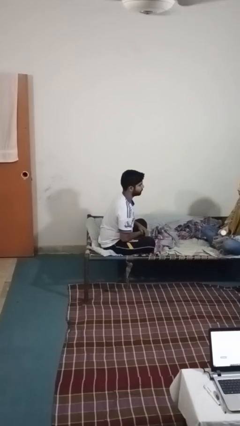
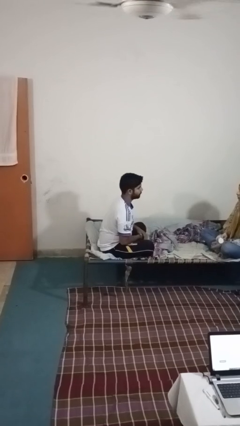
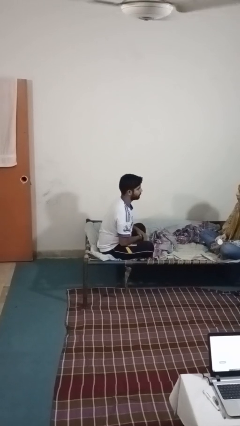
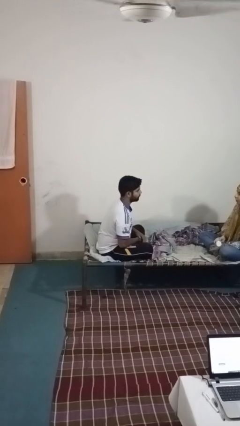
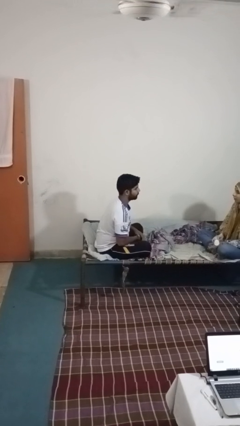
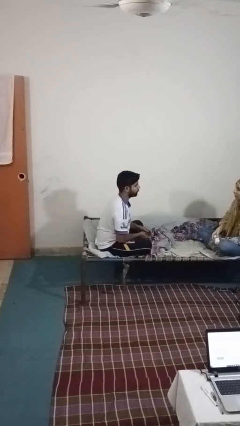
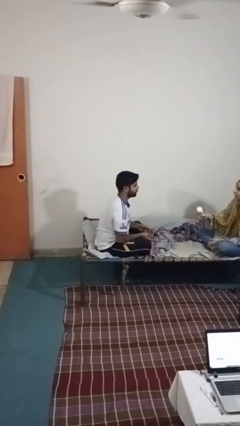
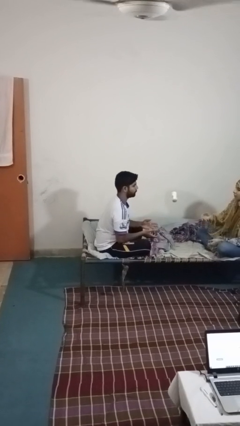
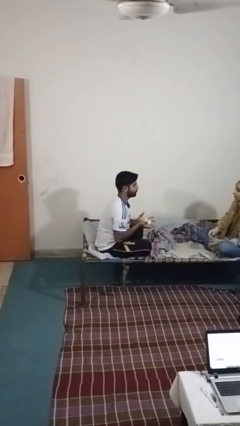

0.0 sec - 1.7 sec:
person catches object from person

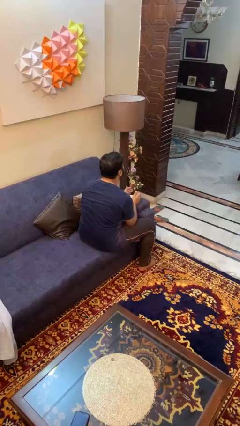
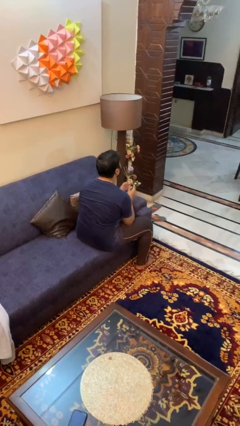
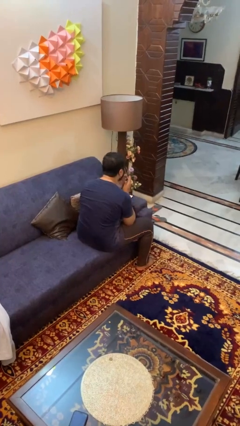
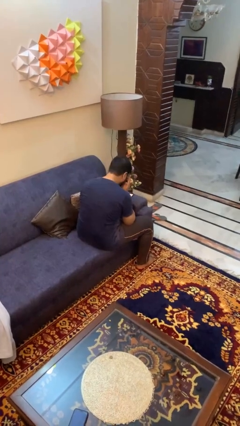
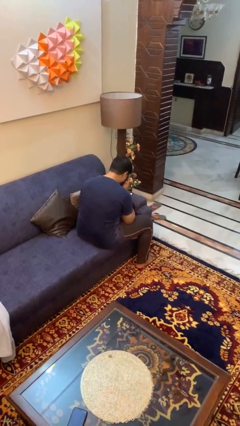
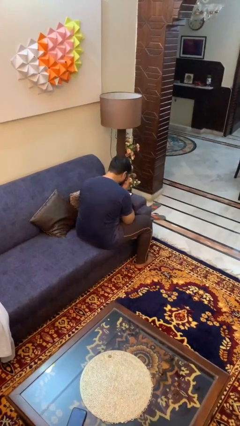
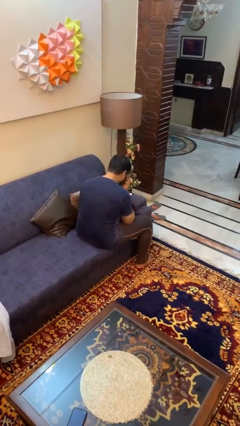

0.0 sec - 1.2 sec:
person sneezes into hand

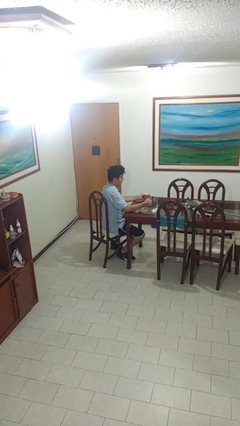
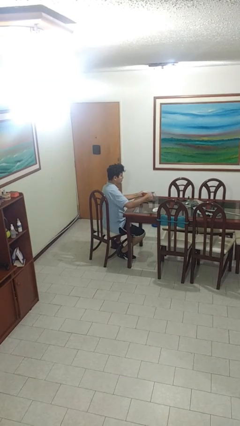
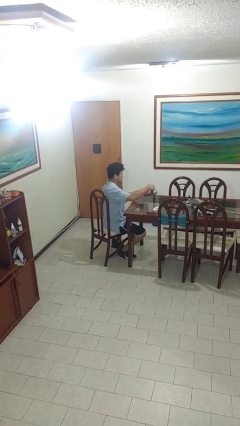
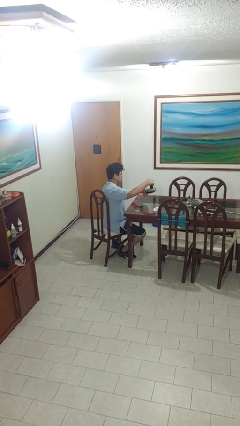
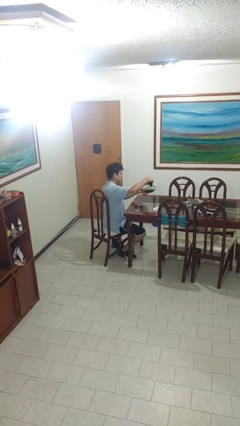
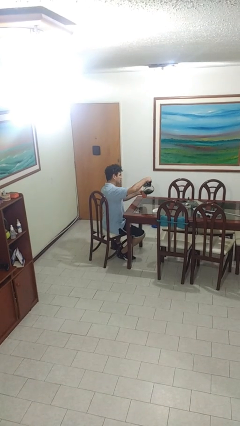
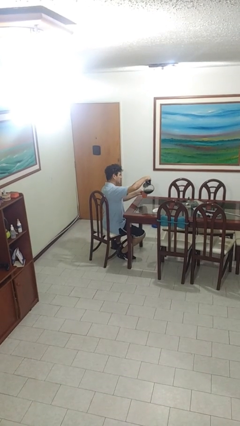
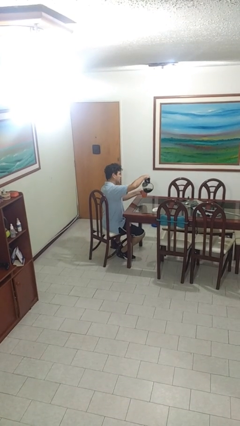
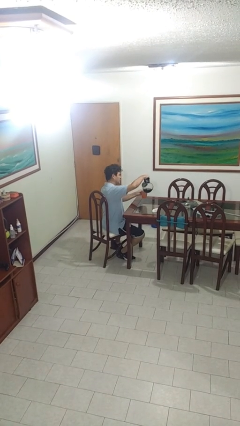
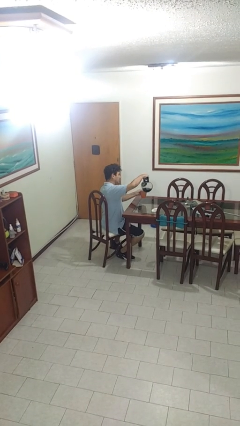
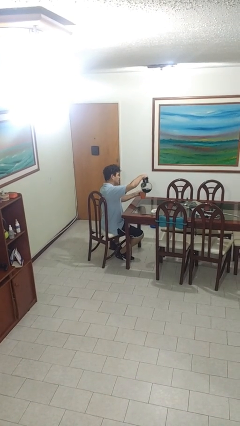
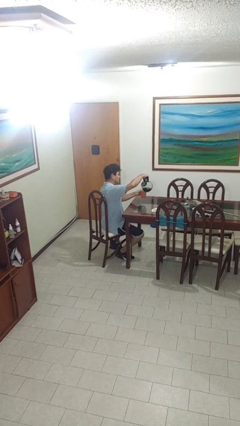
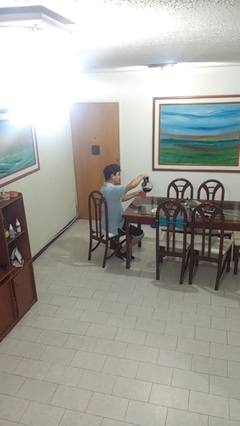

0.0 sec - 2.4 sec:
person pours coffee into mug

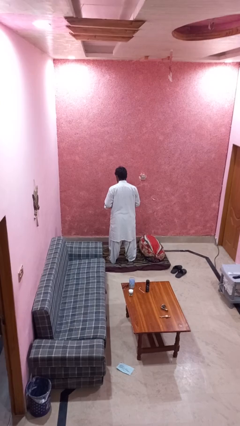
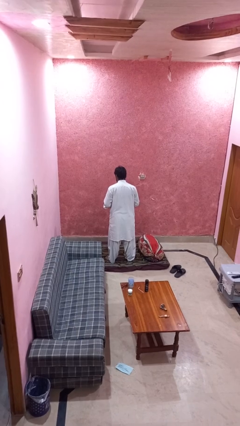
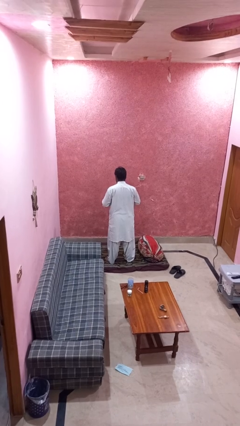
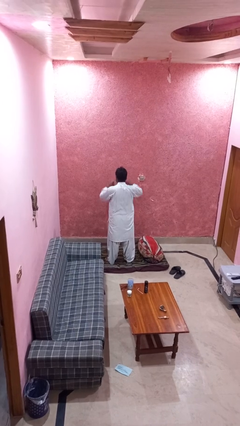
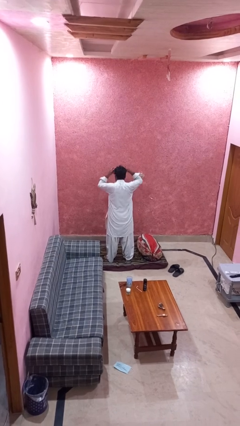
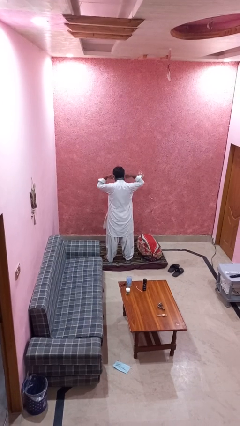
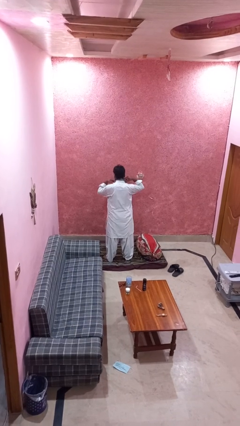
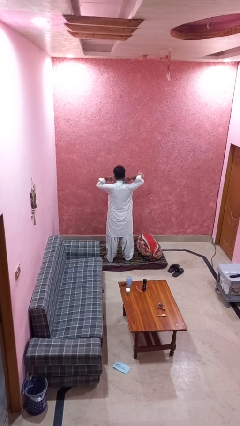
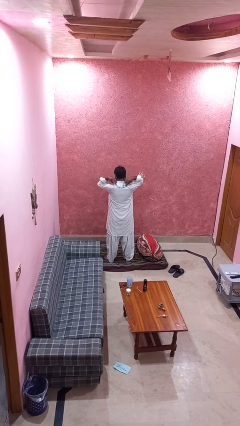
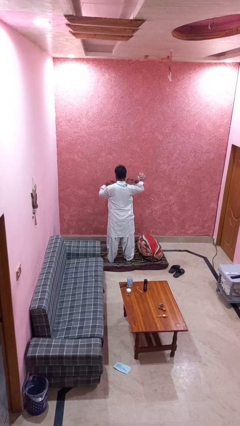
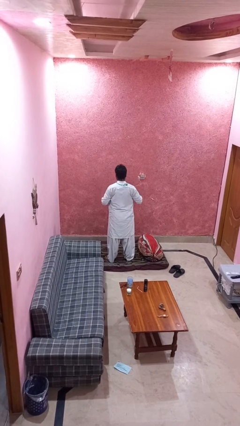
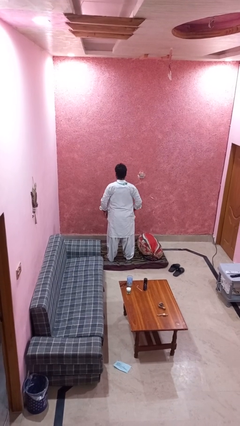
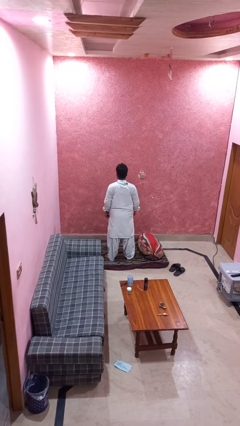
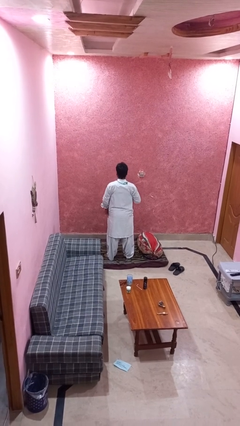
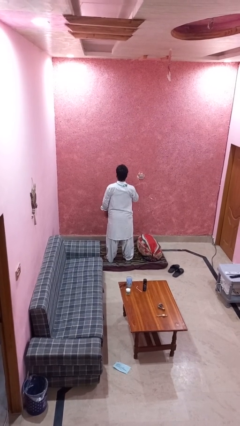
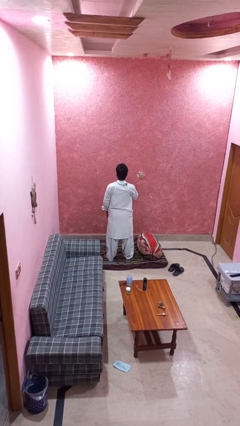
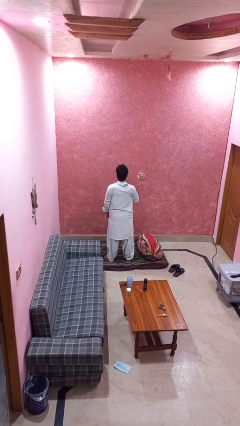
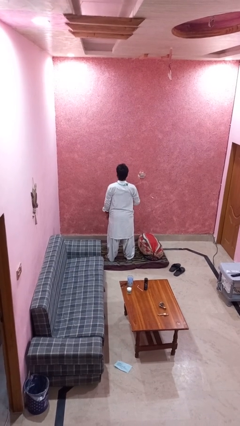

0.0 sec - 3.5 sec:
person puts on necklace

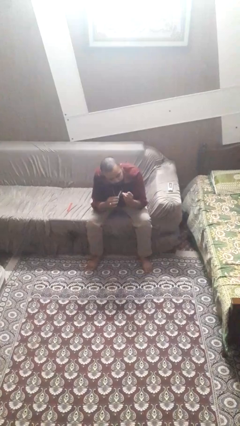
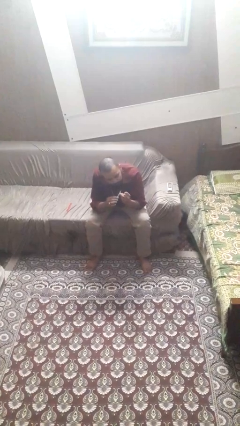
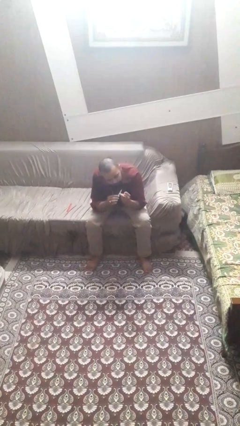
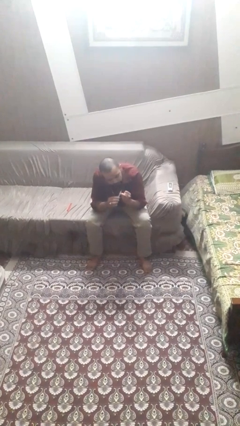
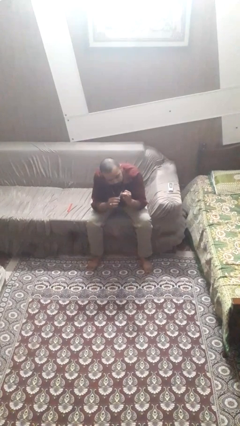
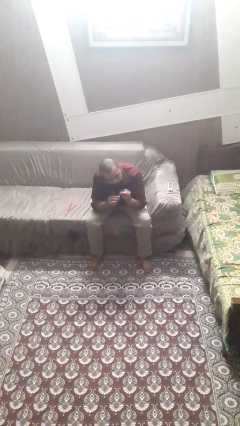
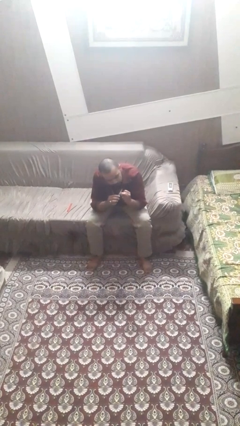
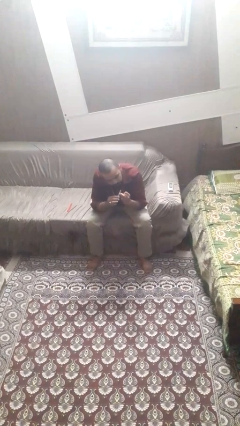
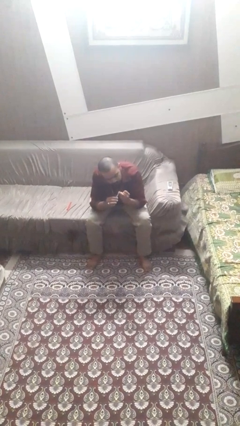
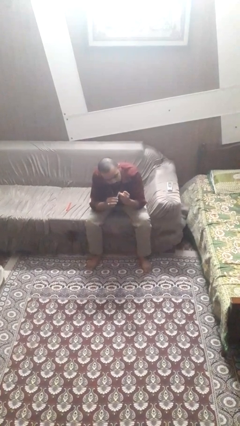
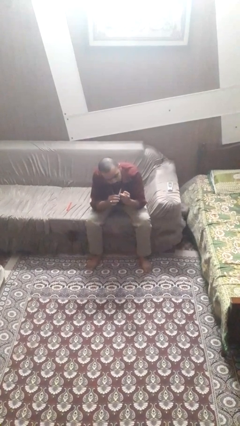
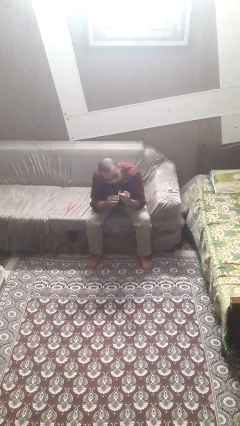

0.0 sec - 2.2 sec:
person files fingernails

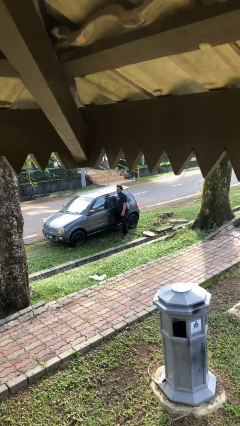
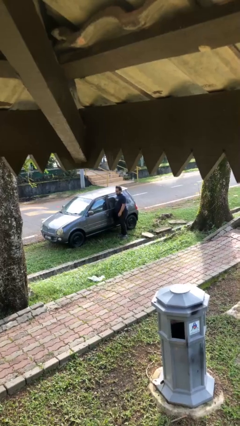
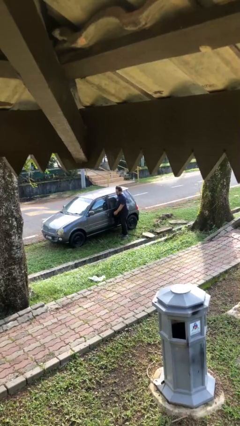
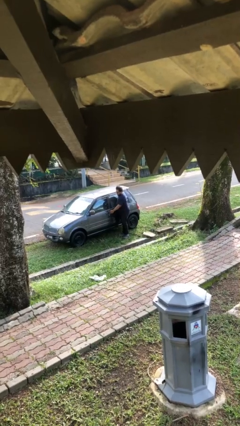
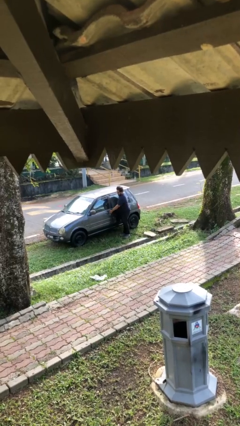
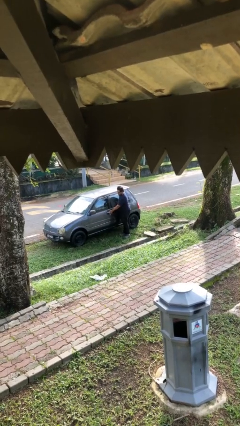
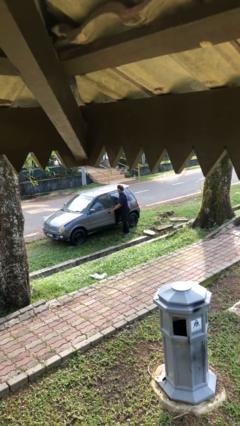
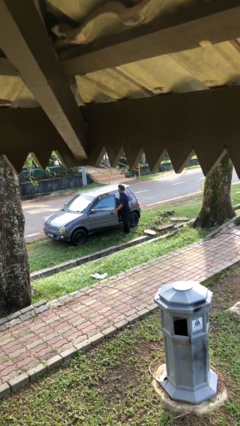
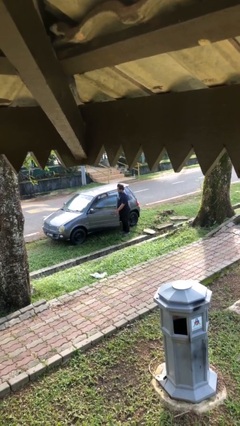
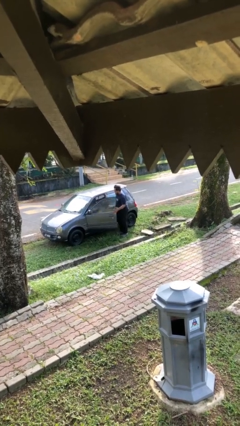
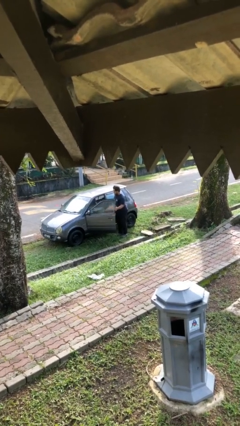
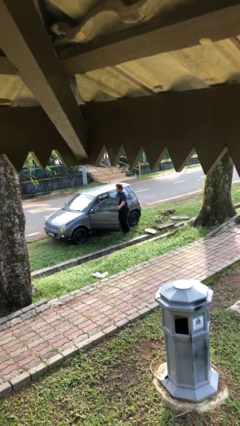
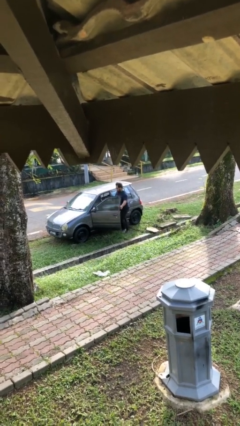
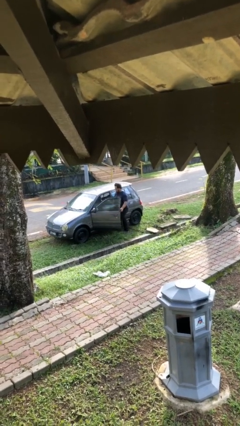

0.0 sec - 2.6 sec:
person opens car door

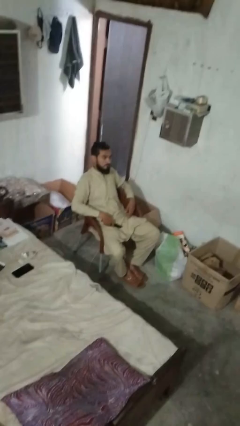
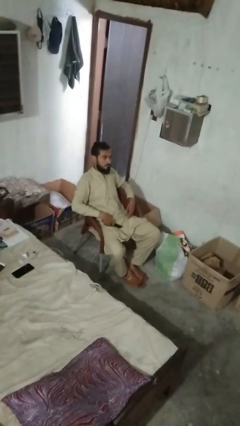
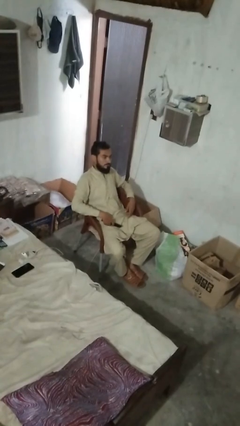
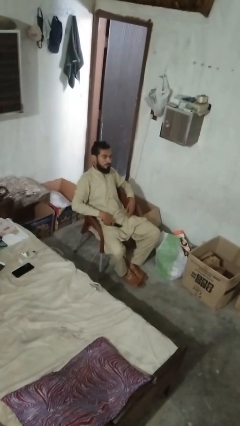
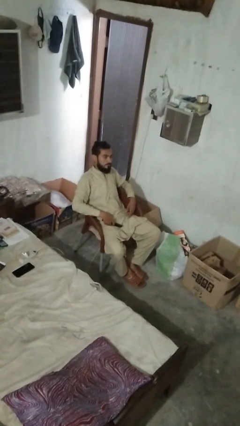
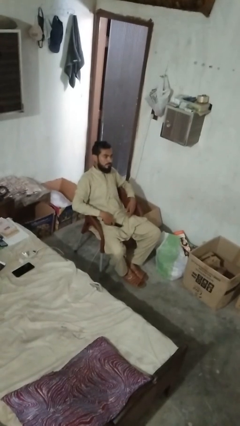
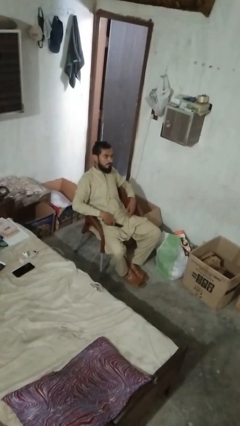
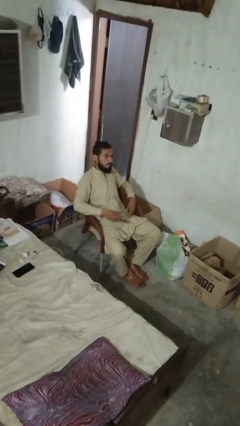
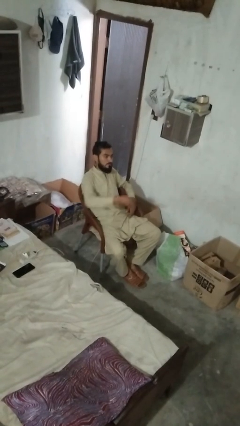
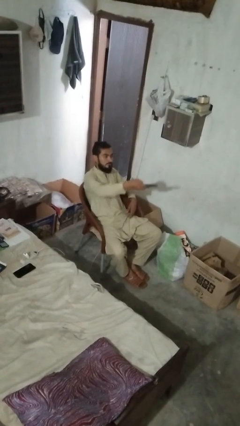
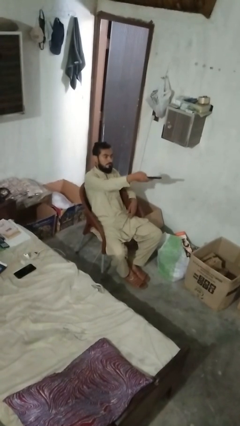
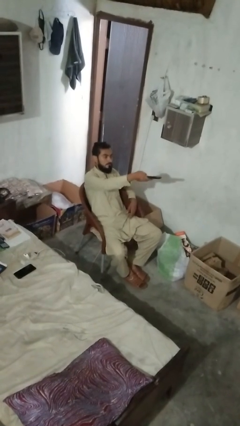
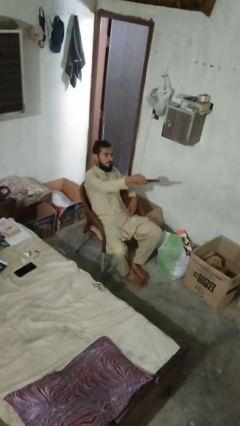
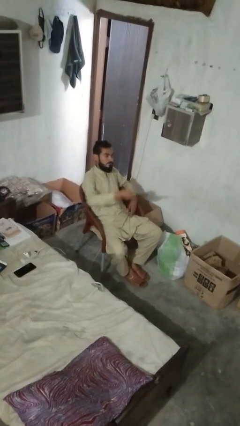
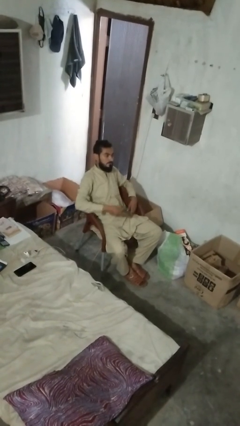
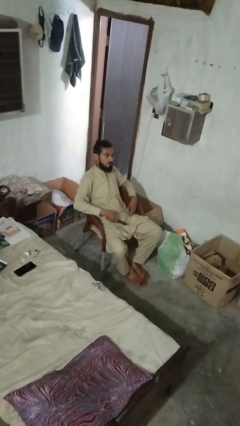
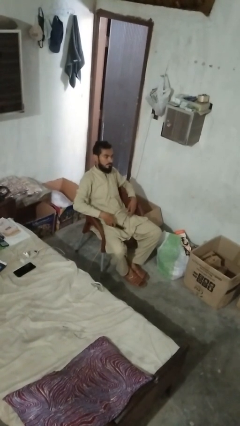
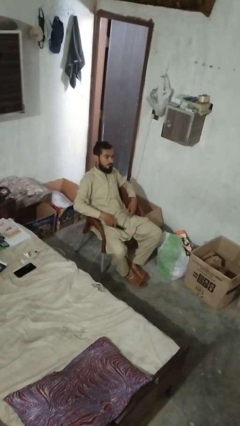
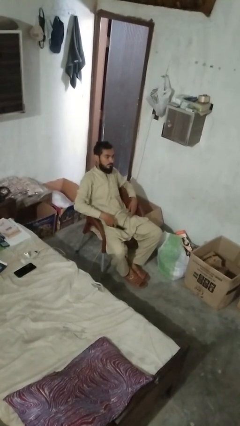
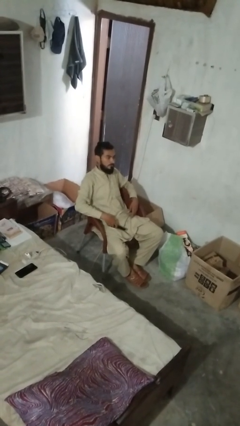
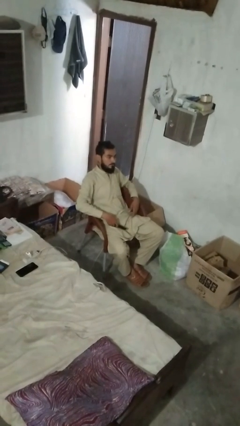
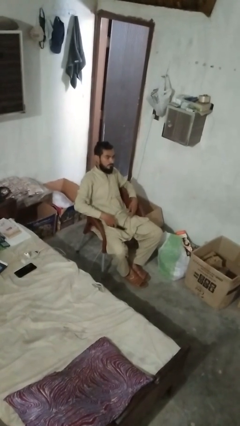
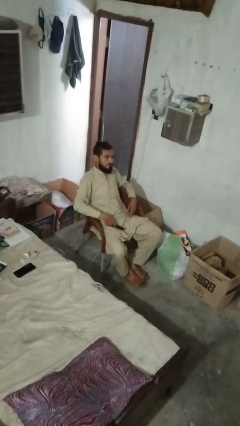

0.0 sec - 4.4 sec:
person uses television remote
